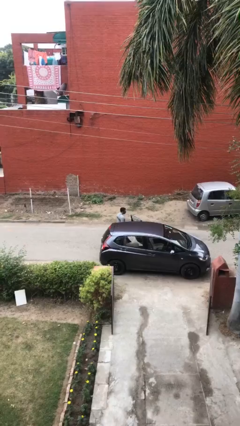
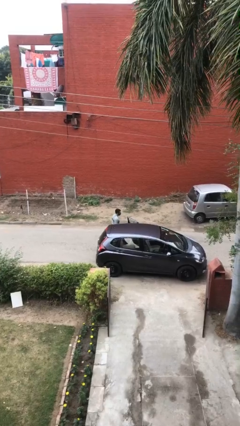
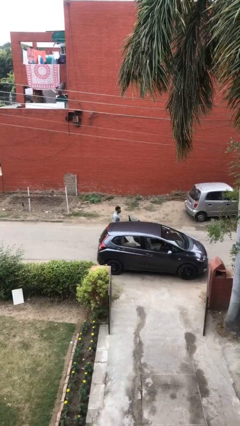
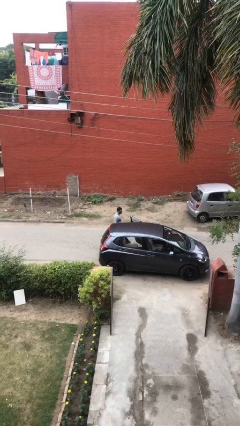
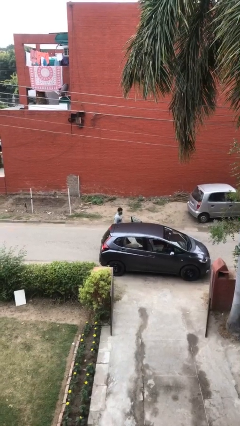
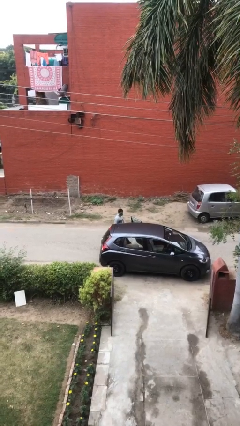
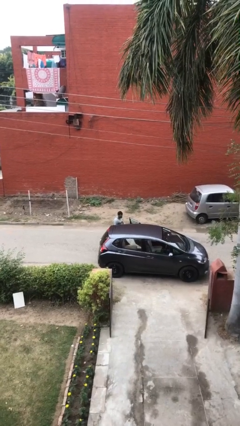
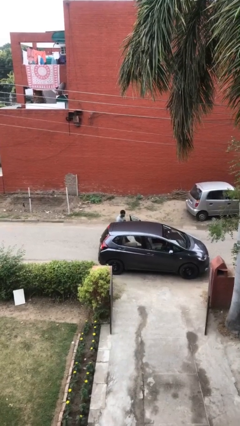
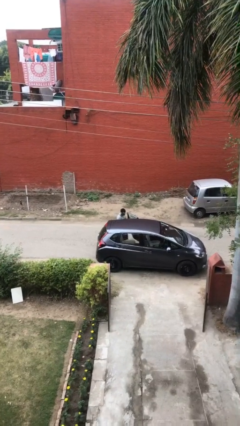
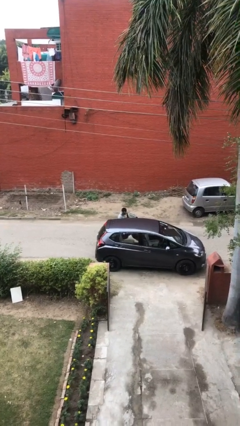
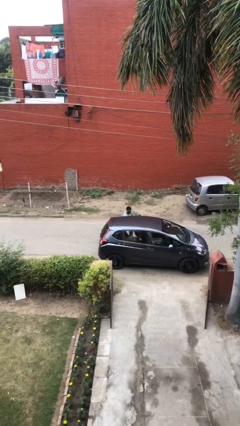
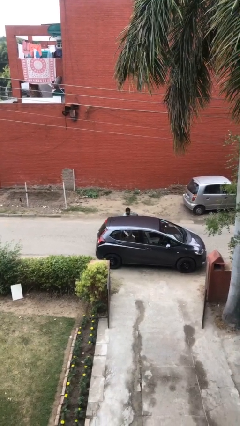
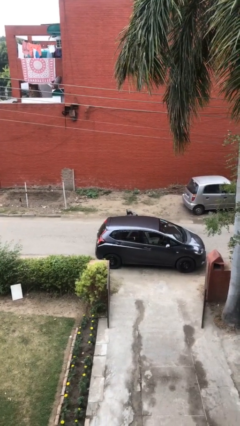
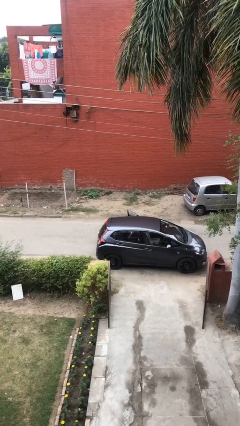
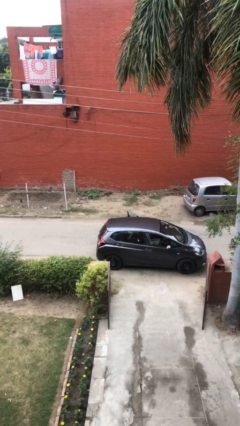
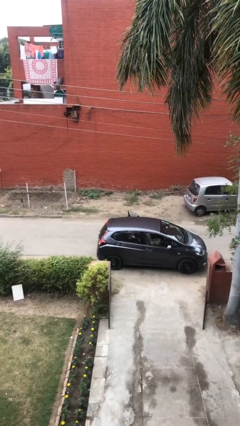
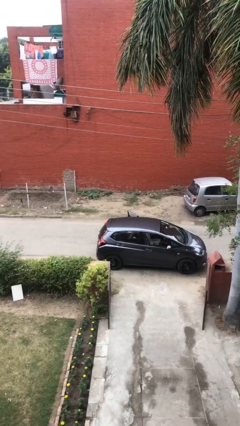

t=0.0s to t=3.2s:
person enters car

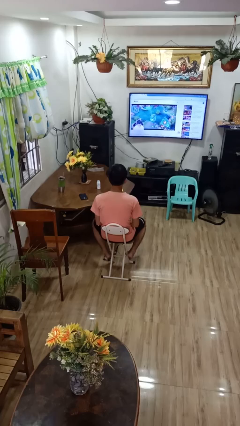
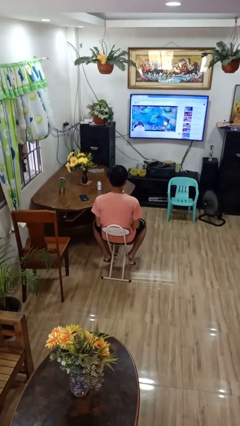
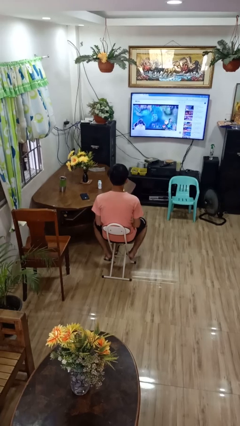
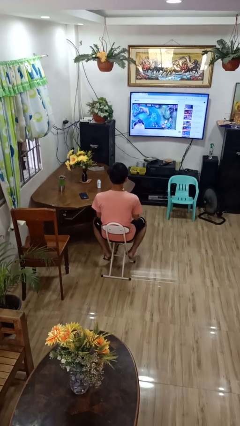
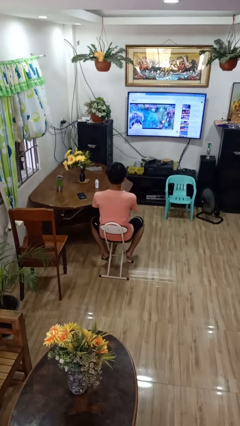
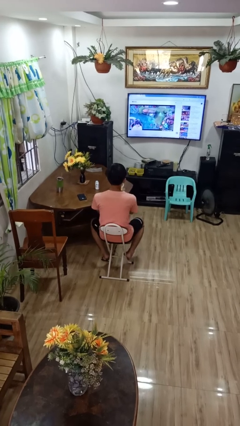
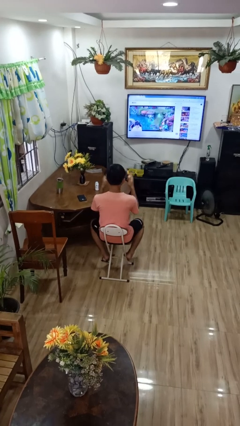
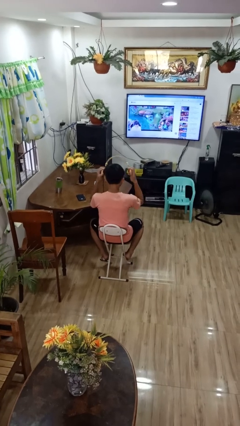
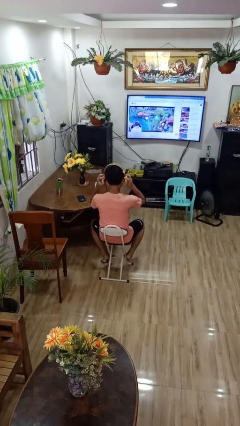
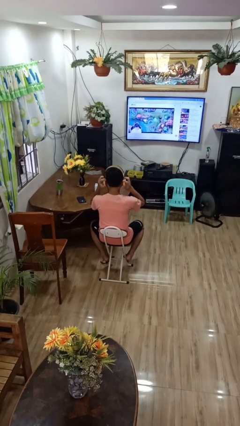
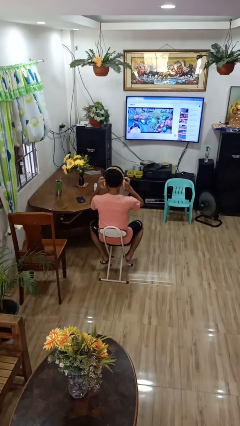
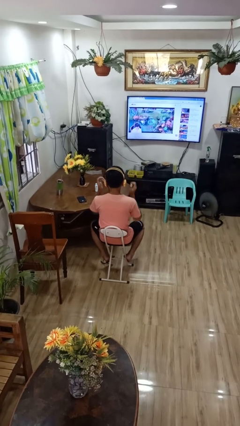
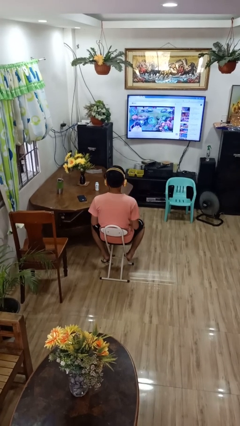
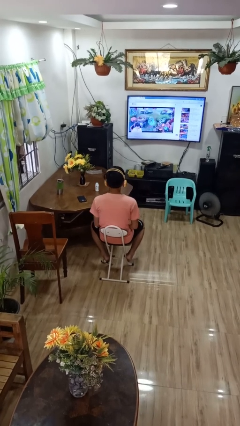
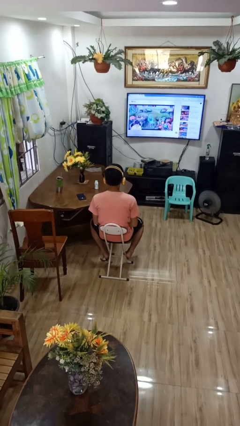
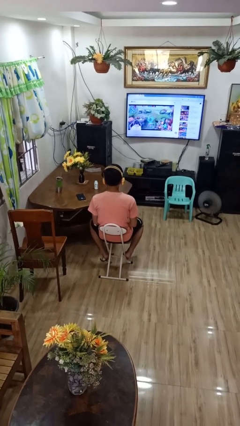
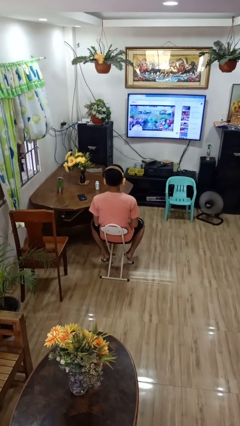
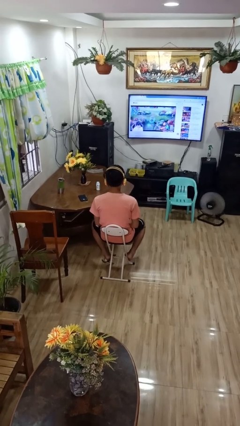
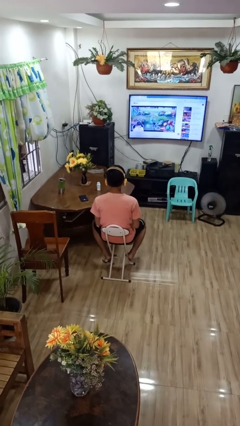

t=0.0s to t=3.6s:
person puts on headphones

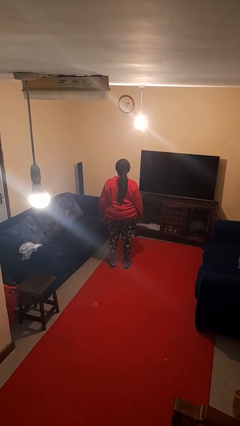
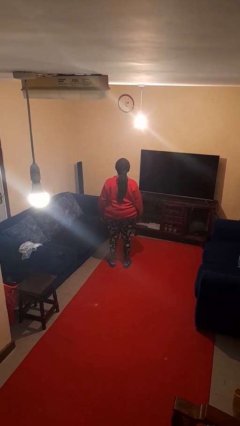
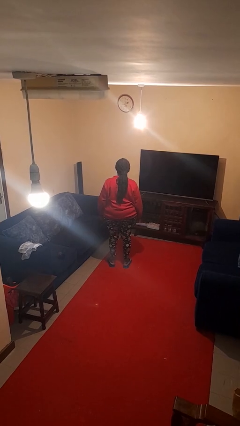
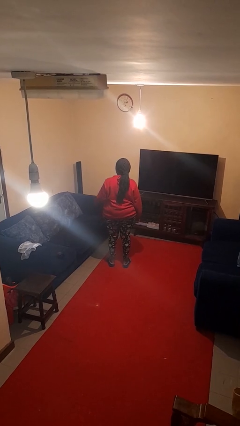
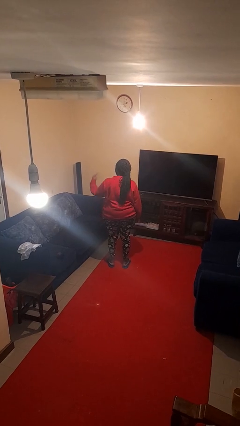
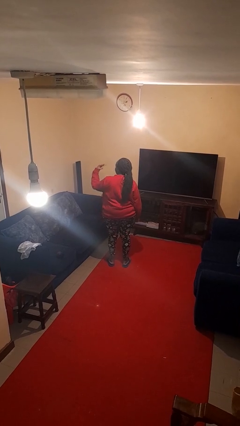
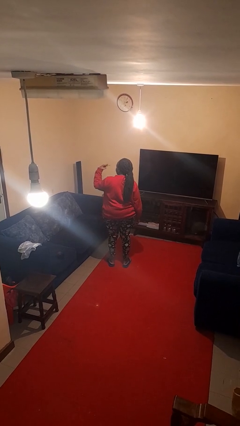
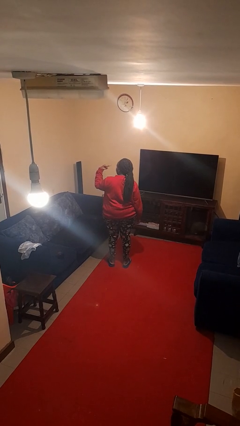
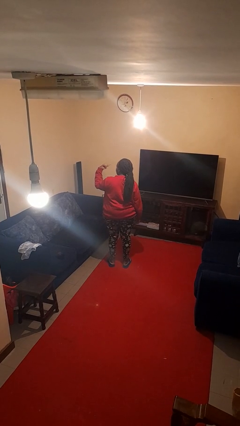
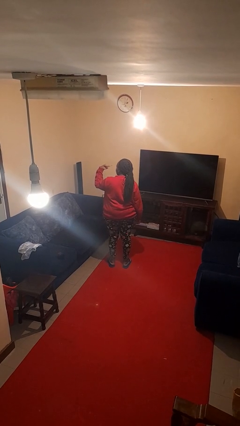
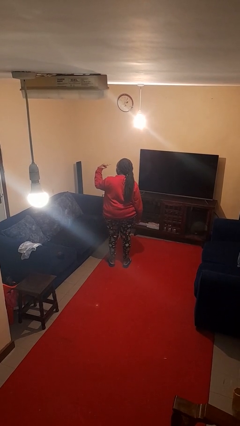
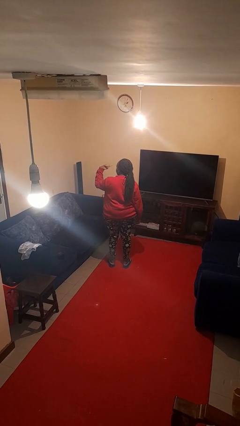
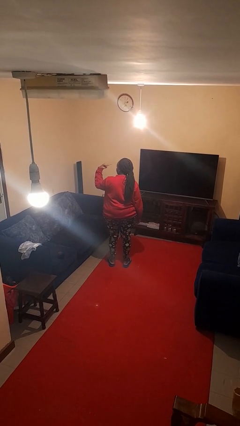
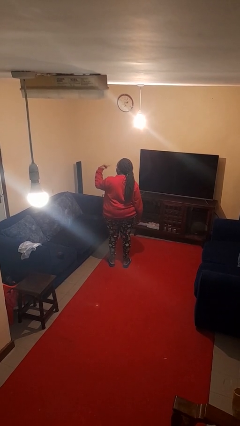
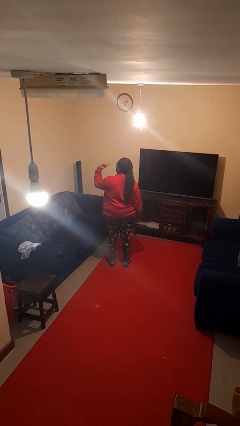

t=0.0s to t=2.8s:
person gestures watch closely

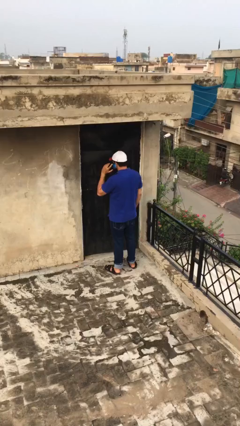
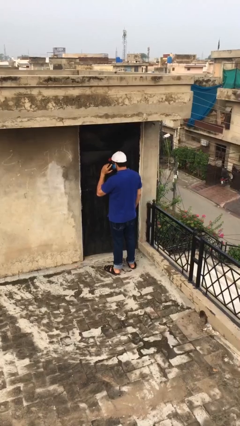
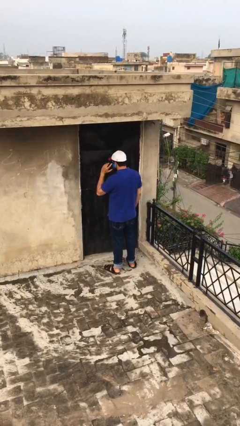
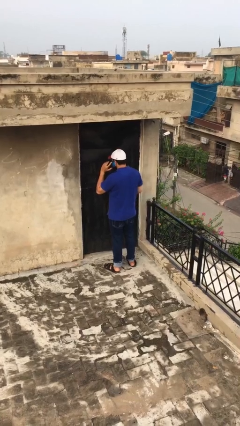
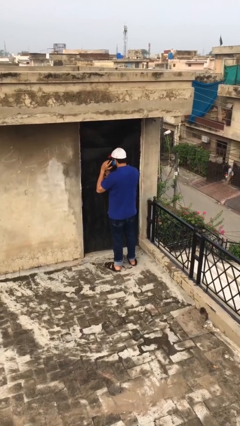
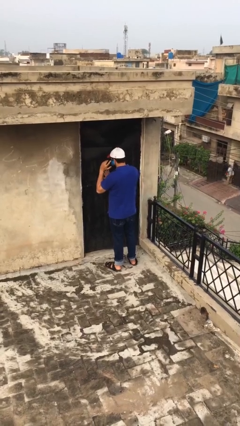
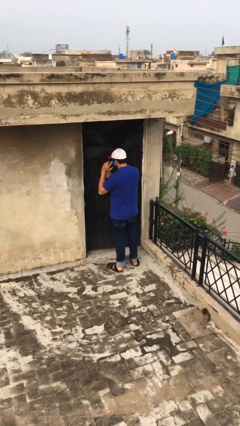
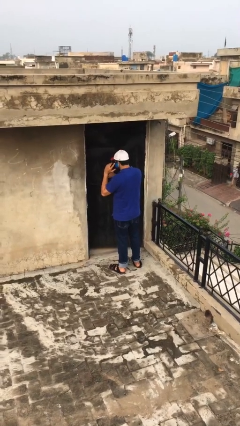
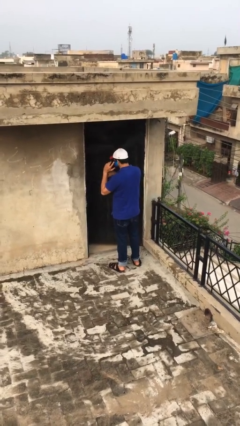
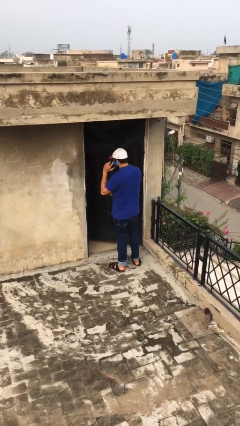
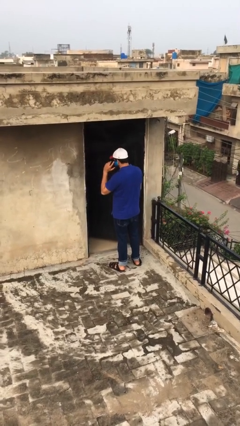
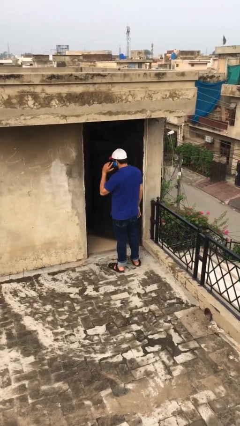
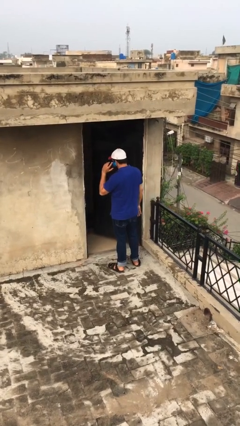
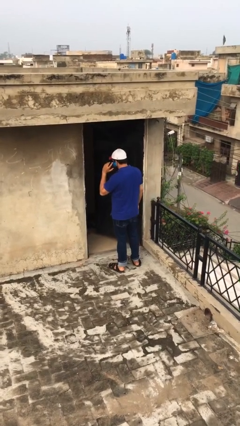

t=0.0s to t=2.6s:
person opens facility door

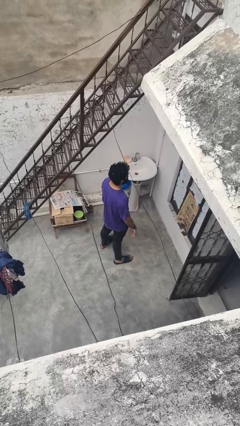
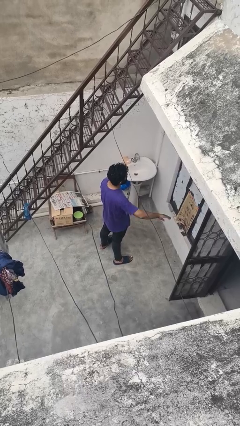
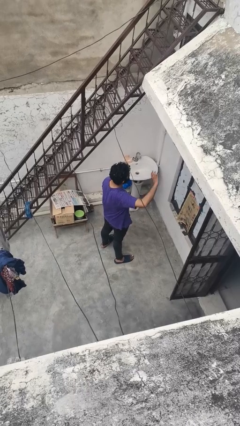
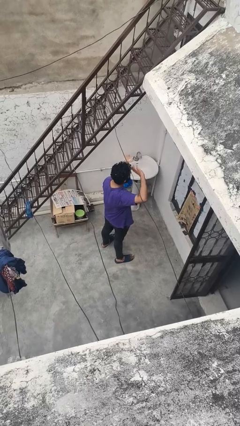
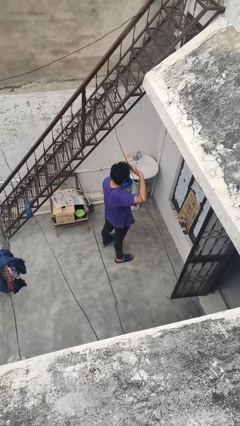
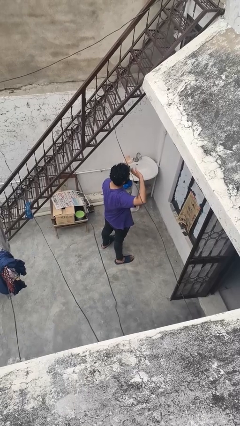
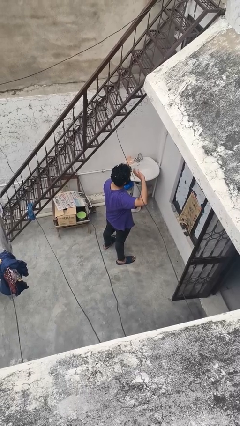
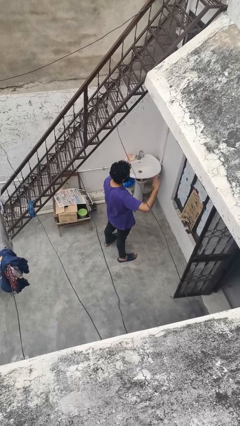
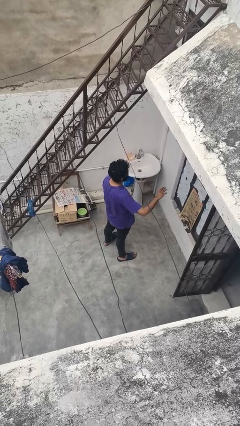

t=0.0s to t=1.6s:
person salutes

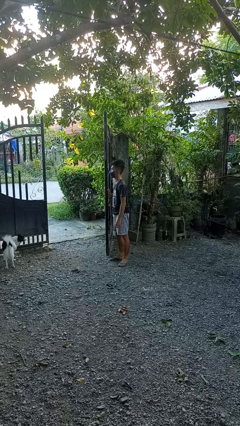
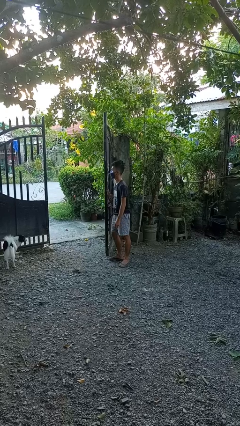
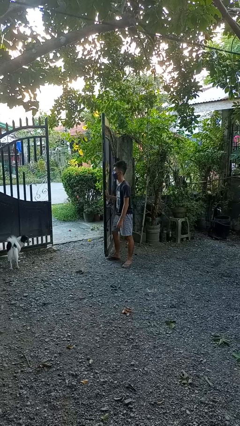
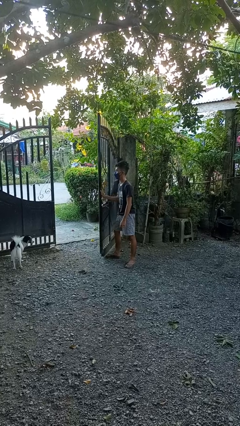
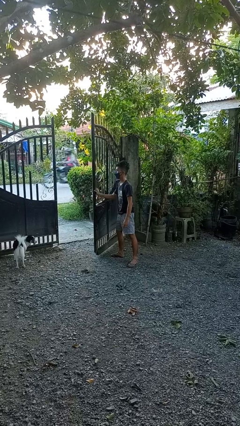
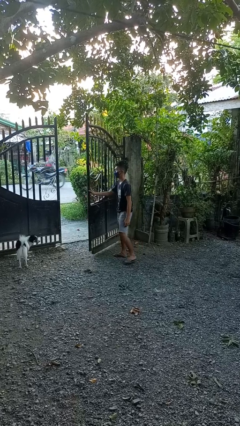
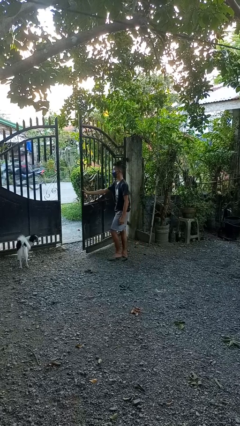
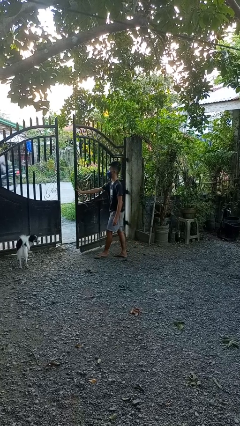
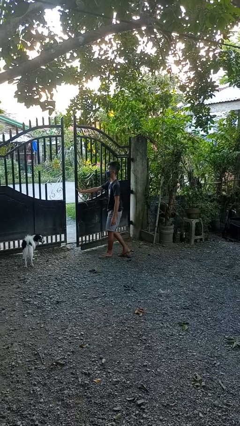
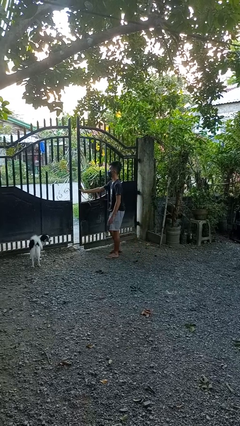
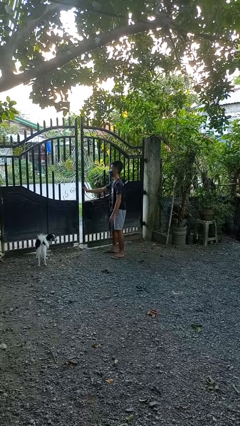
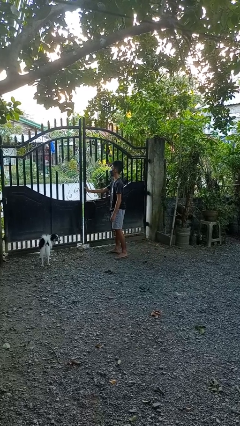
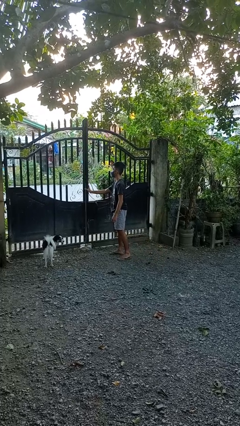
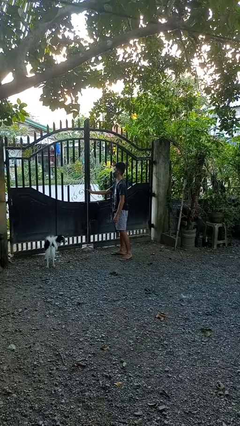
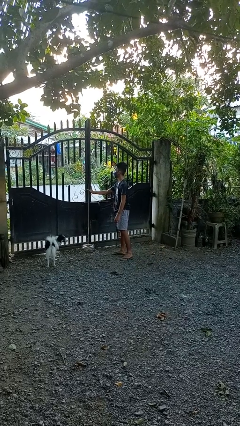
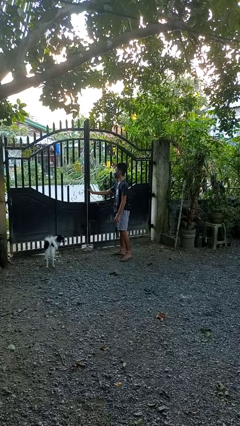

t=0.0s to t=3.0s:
person closes gate

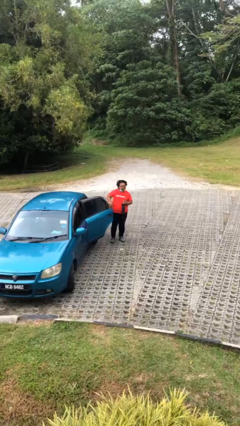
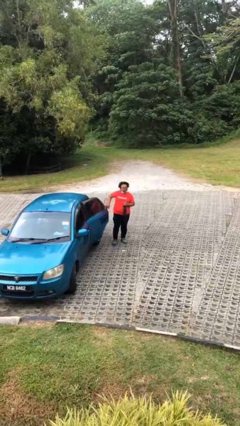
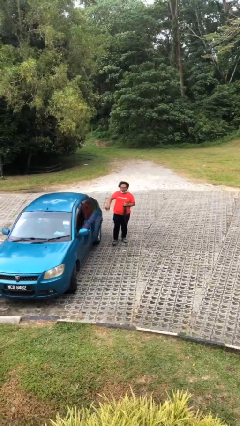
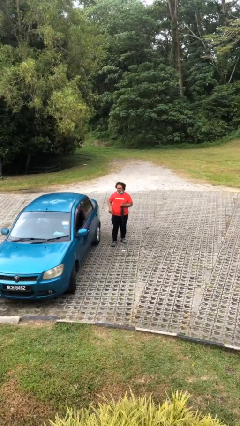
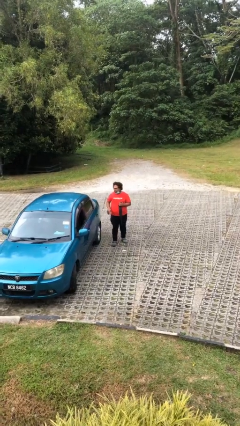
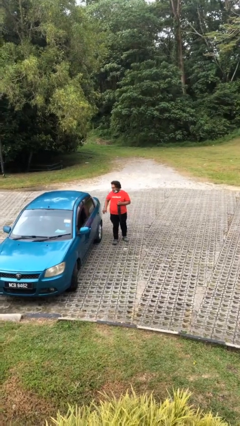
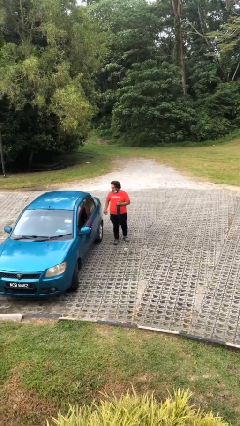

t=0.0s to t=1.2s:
person closes car door
